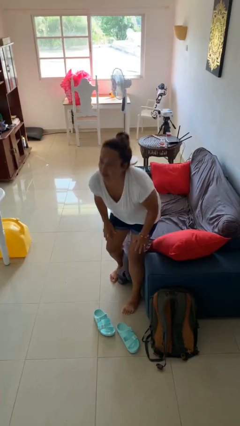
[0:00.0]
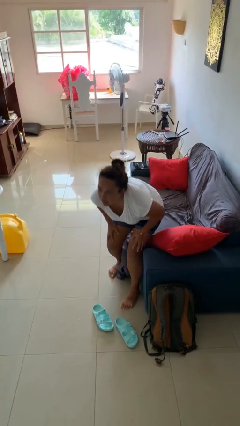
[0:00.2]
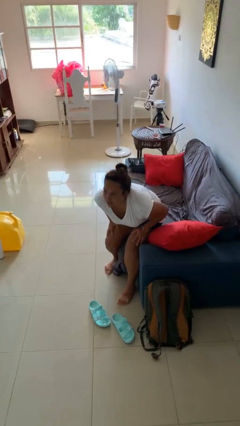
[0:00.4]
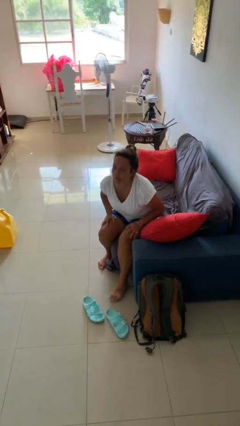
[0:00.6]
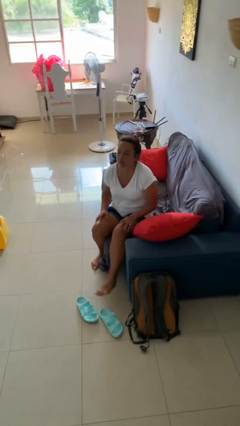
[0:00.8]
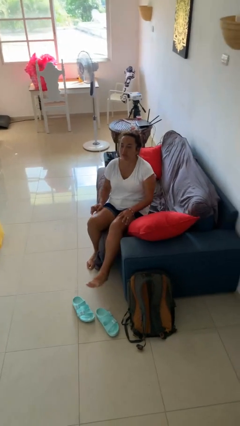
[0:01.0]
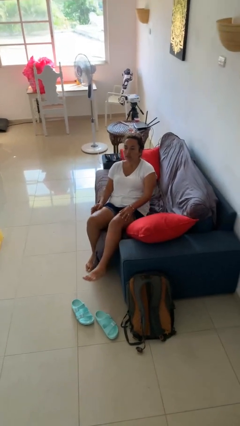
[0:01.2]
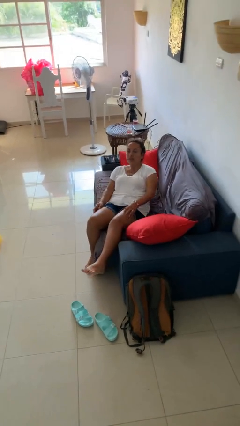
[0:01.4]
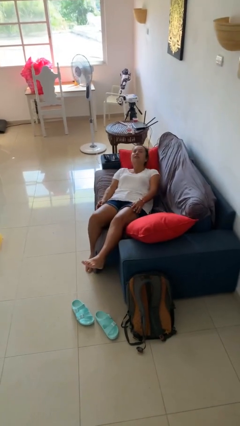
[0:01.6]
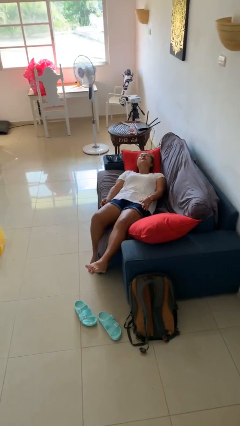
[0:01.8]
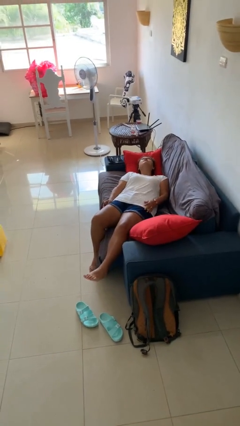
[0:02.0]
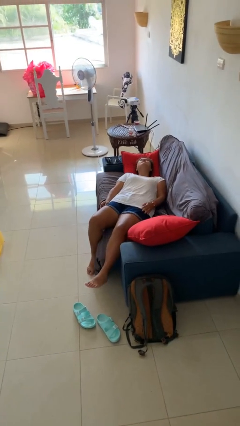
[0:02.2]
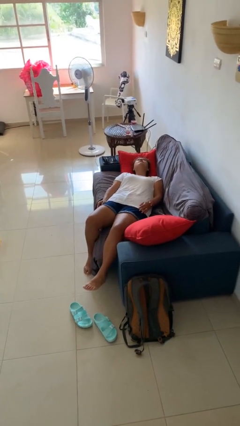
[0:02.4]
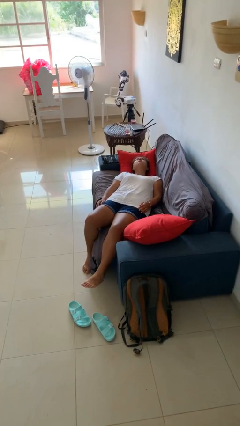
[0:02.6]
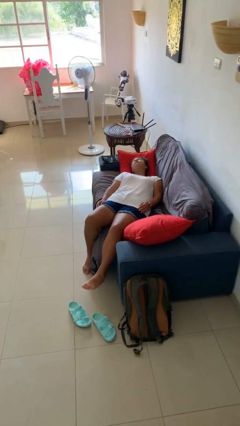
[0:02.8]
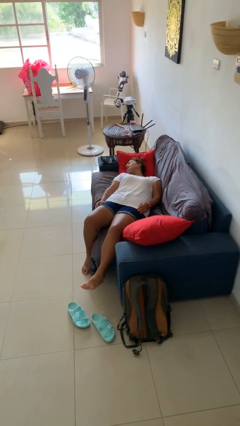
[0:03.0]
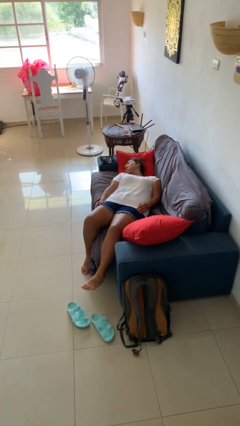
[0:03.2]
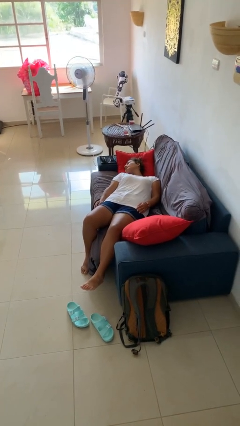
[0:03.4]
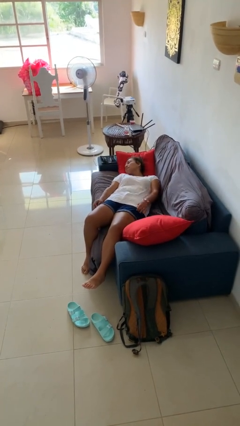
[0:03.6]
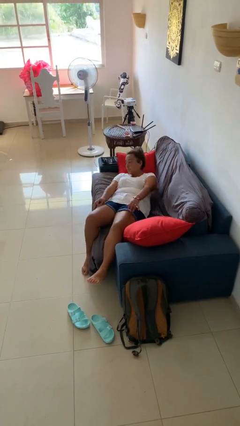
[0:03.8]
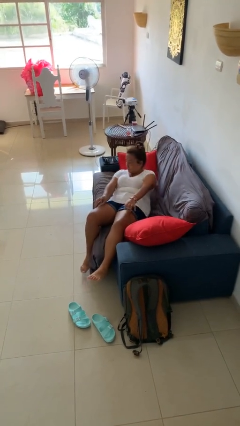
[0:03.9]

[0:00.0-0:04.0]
person lies down on couch

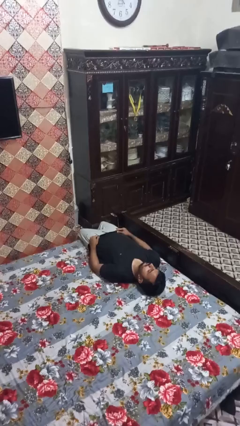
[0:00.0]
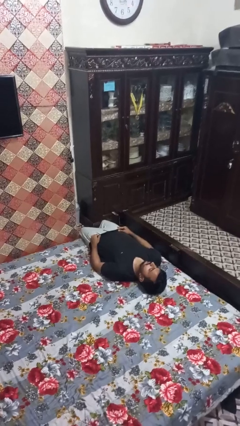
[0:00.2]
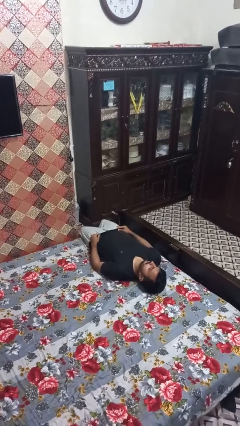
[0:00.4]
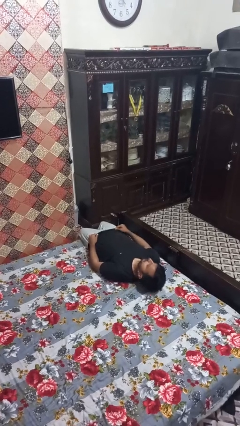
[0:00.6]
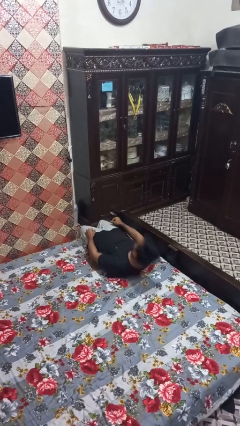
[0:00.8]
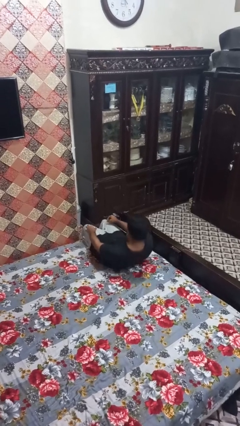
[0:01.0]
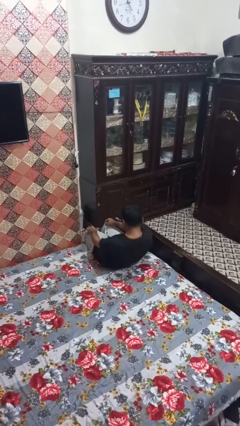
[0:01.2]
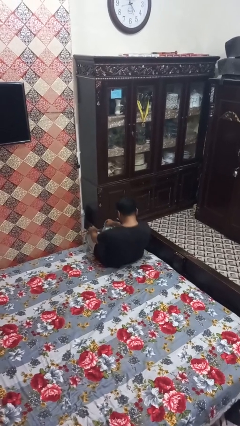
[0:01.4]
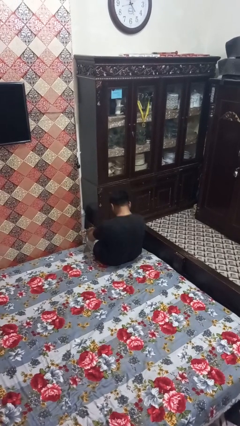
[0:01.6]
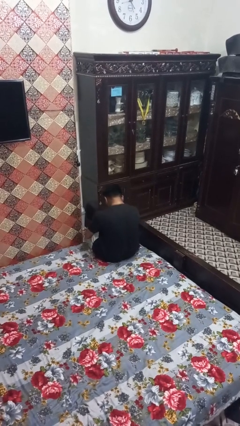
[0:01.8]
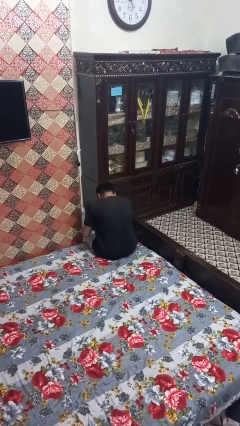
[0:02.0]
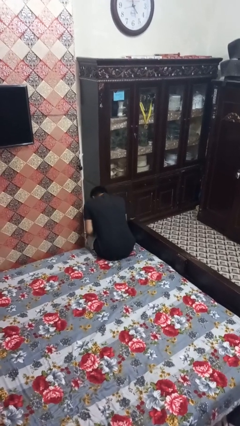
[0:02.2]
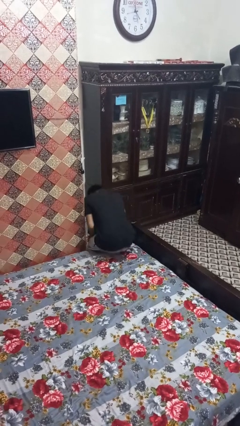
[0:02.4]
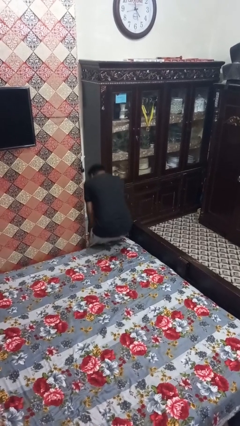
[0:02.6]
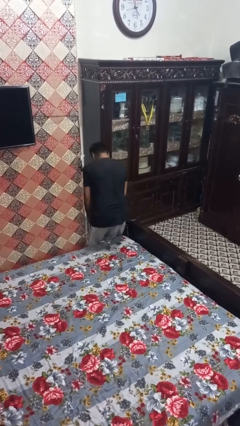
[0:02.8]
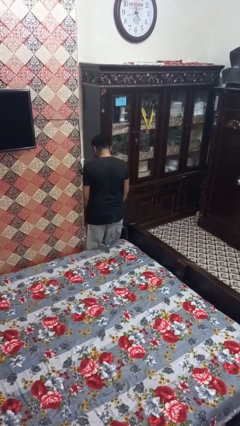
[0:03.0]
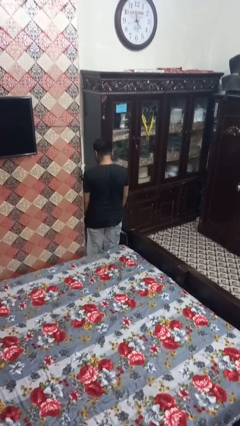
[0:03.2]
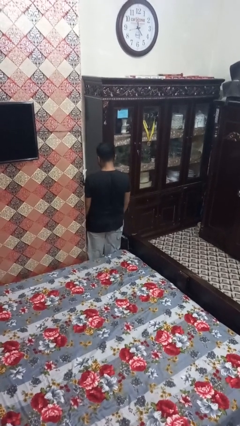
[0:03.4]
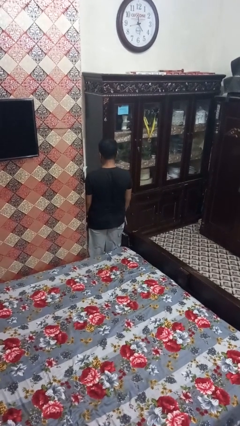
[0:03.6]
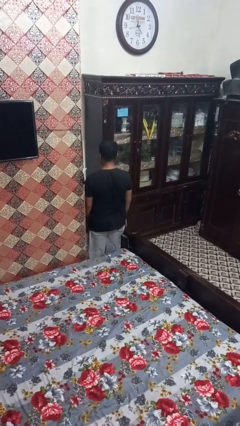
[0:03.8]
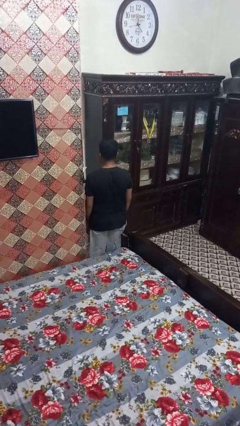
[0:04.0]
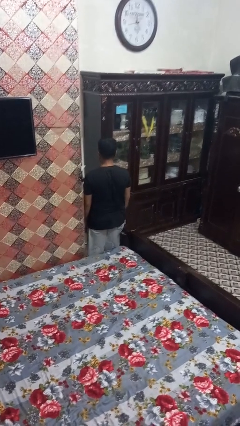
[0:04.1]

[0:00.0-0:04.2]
person stands up

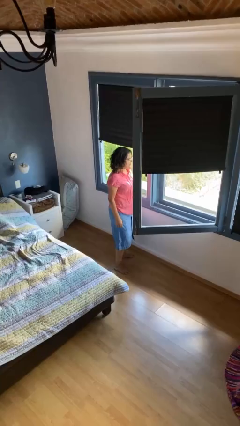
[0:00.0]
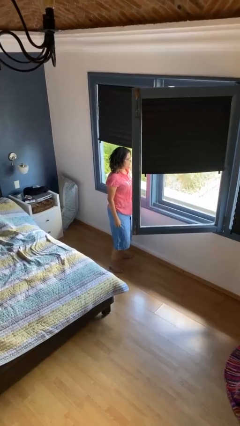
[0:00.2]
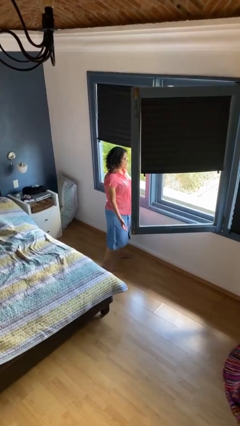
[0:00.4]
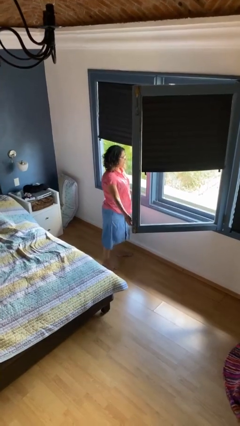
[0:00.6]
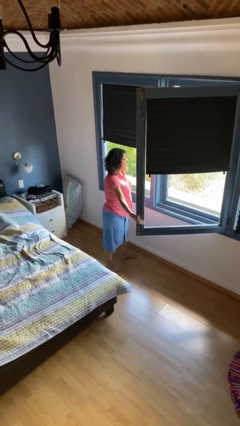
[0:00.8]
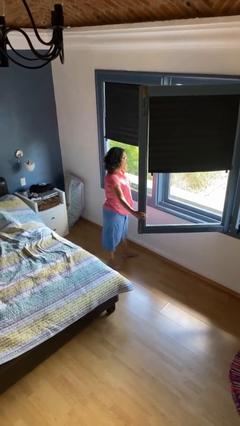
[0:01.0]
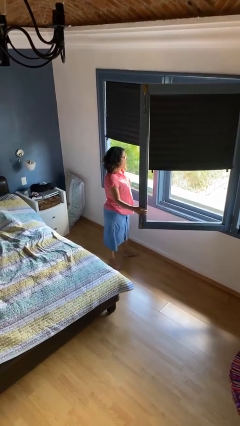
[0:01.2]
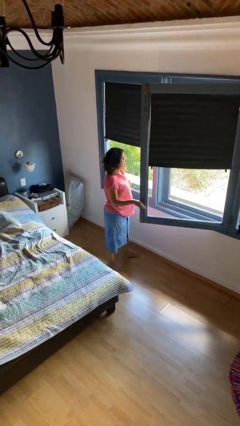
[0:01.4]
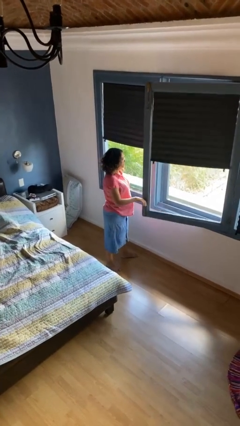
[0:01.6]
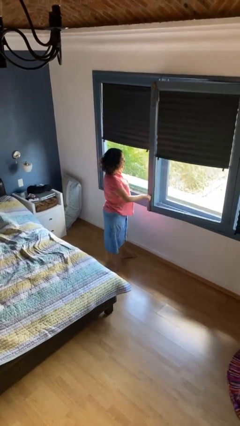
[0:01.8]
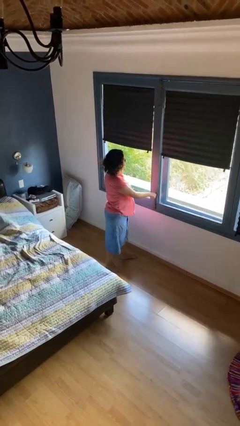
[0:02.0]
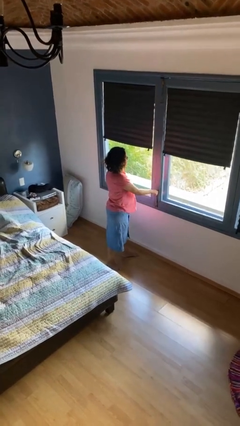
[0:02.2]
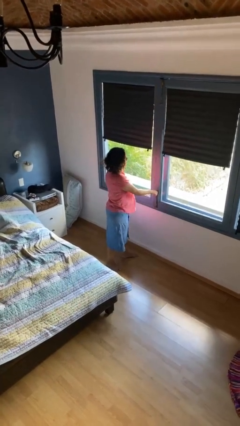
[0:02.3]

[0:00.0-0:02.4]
person closes home window

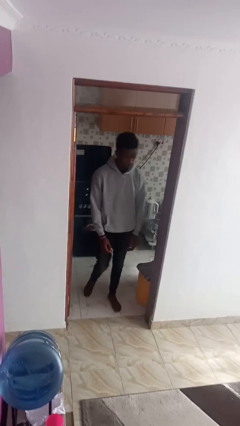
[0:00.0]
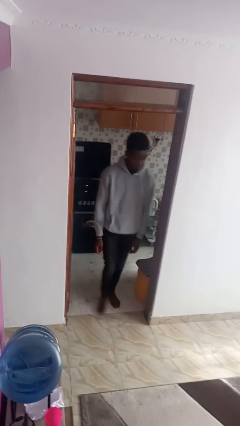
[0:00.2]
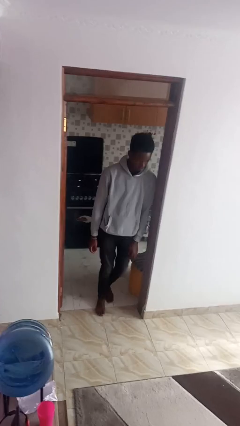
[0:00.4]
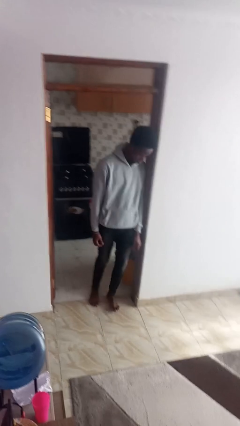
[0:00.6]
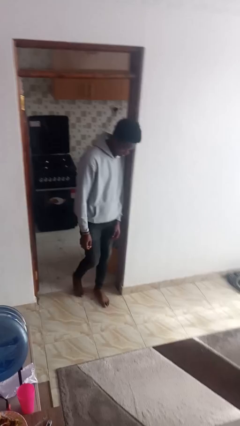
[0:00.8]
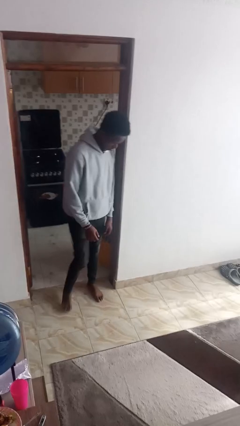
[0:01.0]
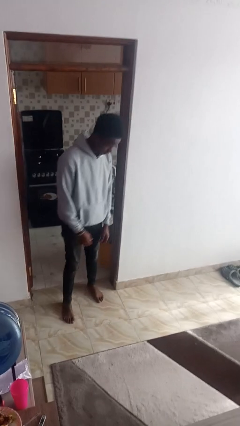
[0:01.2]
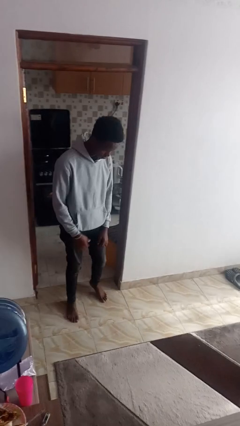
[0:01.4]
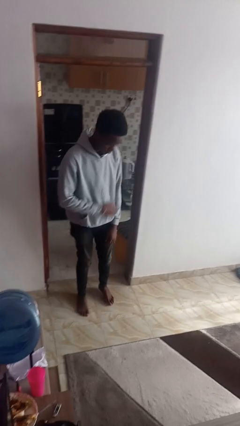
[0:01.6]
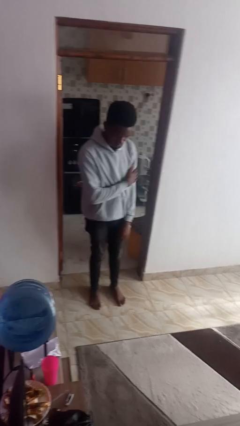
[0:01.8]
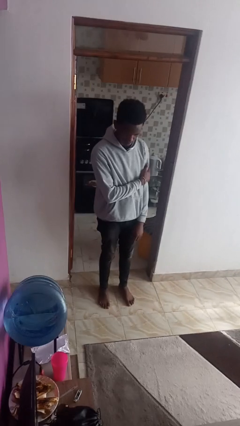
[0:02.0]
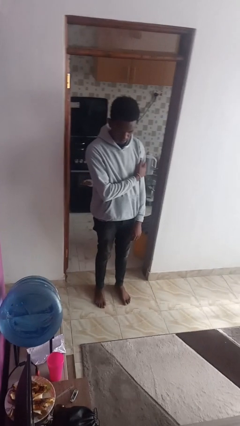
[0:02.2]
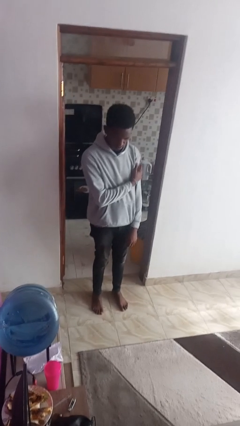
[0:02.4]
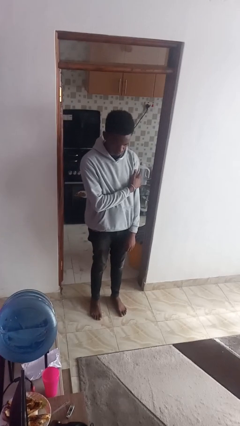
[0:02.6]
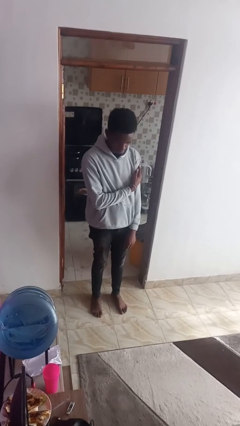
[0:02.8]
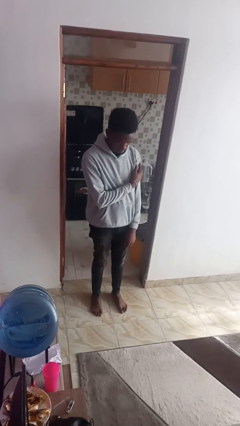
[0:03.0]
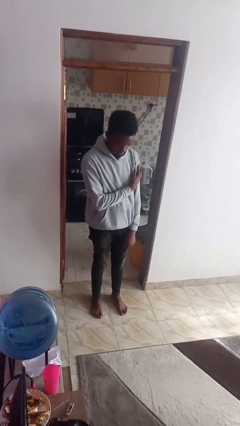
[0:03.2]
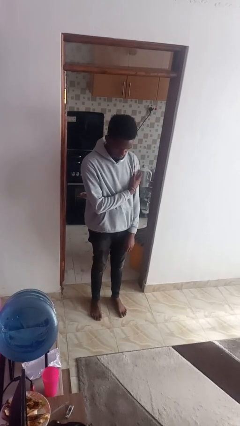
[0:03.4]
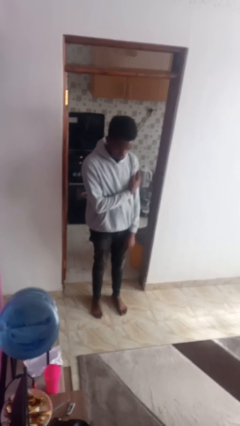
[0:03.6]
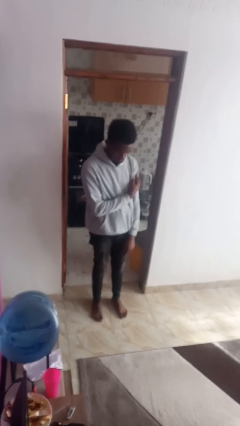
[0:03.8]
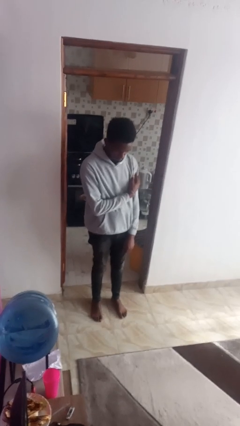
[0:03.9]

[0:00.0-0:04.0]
person bumps into wall

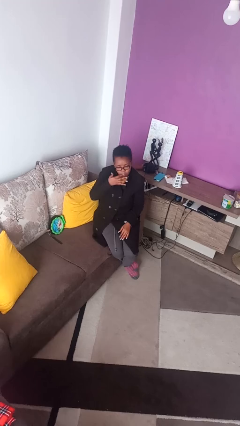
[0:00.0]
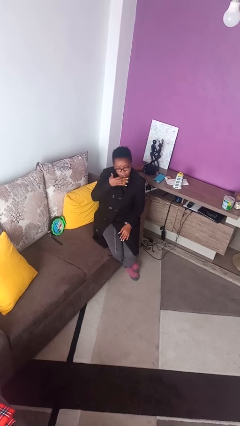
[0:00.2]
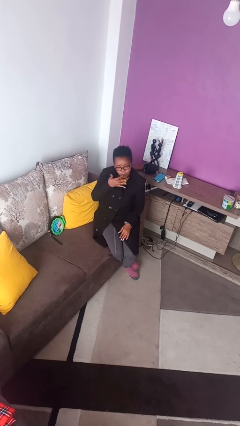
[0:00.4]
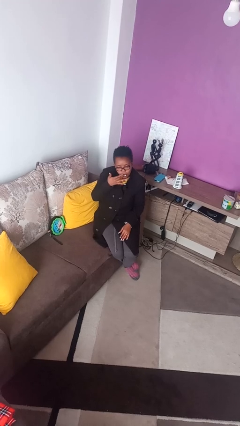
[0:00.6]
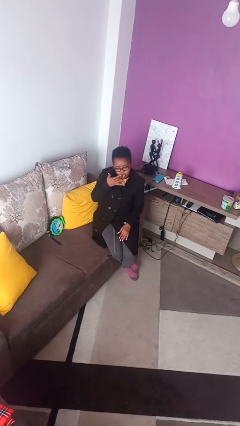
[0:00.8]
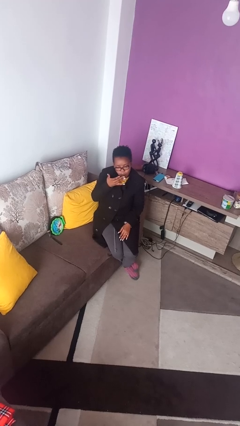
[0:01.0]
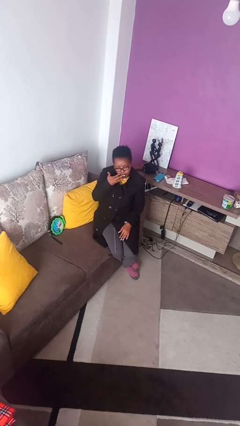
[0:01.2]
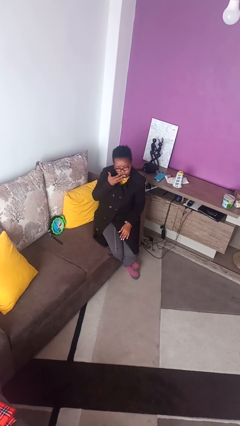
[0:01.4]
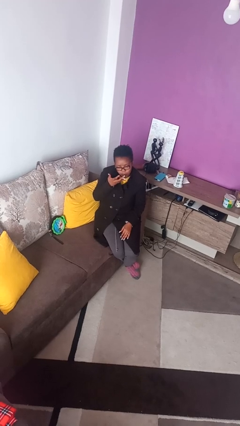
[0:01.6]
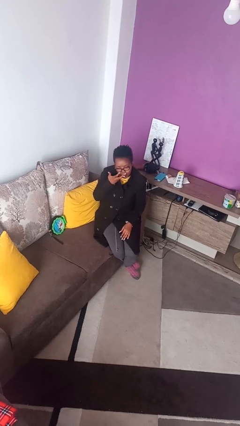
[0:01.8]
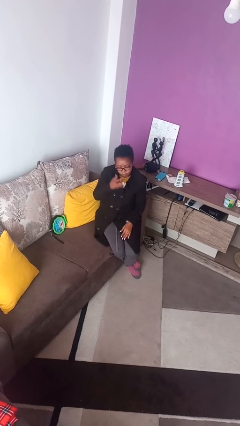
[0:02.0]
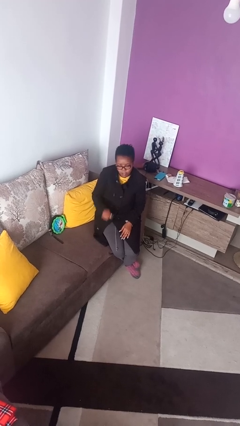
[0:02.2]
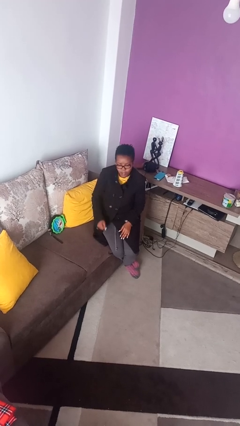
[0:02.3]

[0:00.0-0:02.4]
person licks fingers

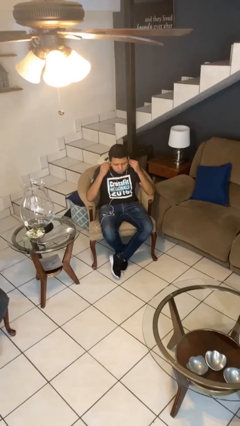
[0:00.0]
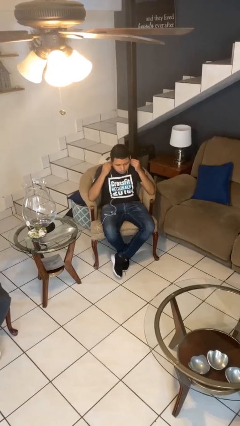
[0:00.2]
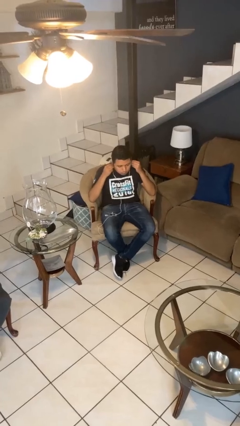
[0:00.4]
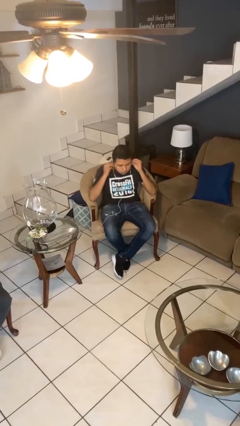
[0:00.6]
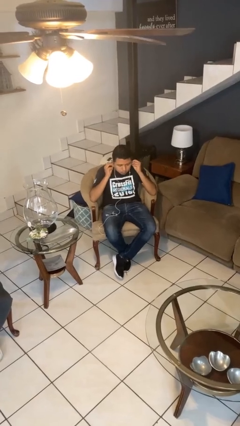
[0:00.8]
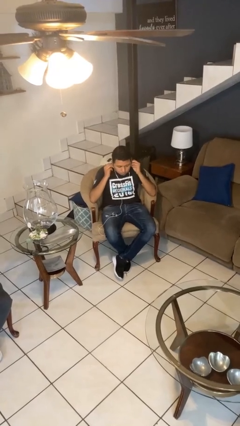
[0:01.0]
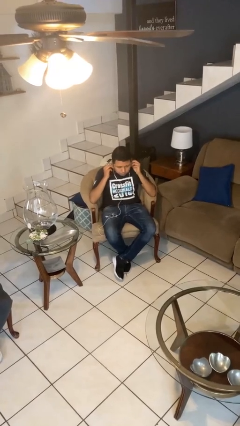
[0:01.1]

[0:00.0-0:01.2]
person puts on headphones
